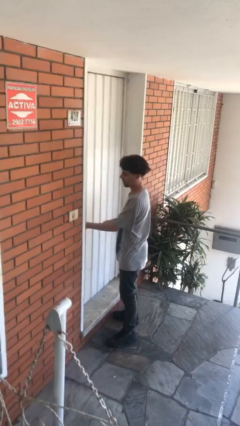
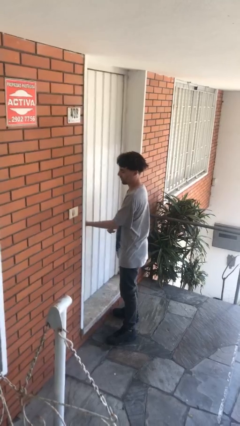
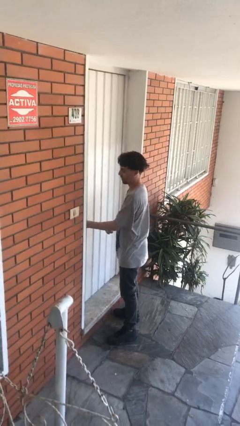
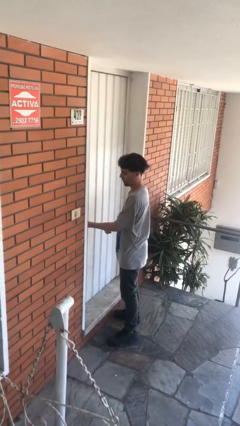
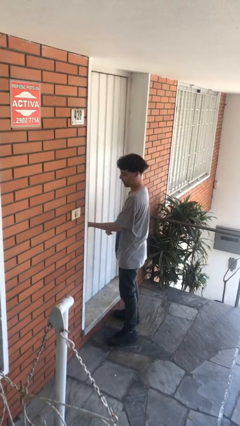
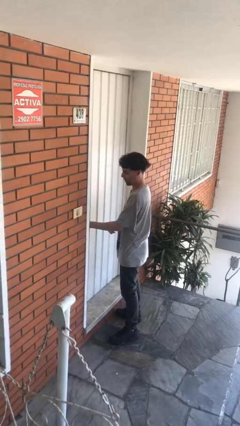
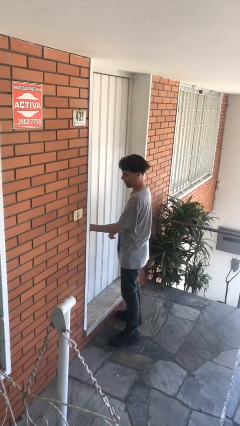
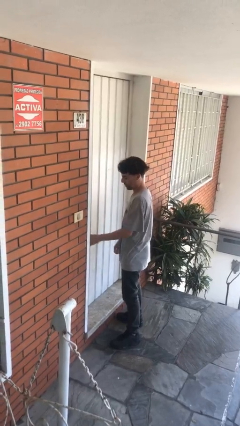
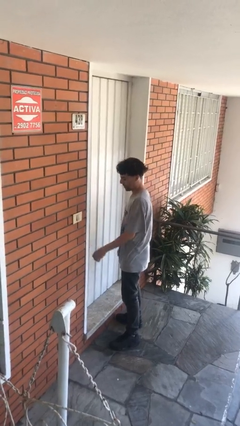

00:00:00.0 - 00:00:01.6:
person locks door with keys

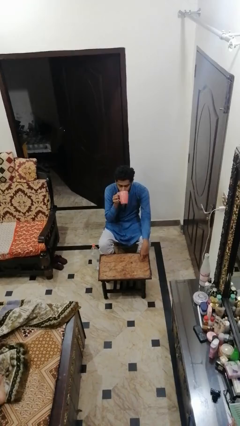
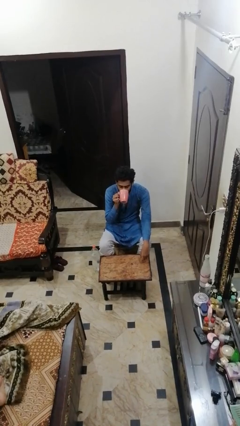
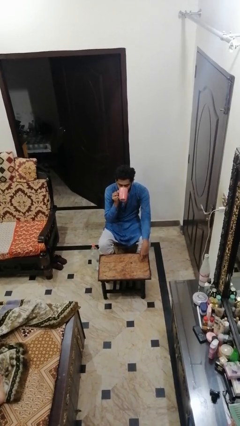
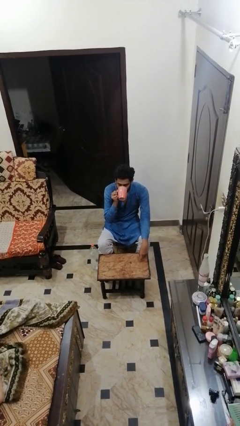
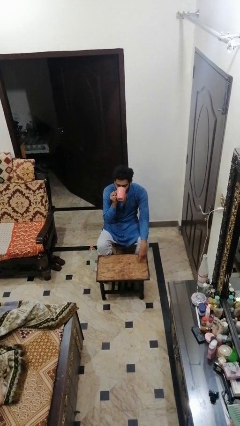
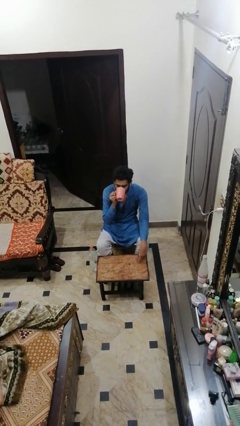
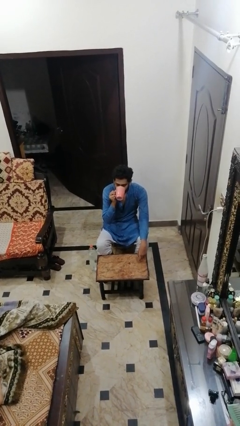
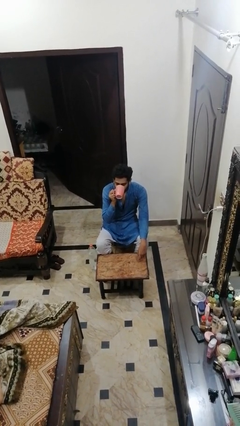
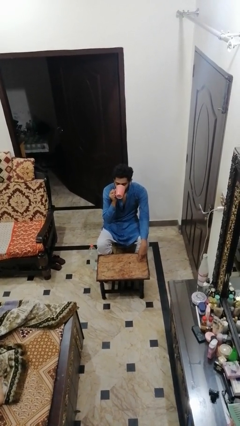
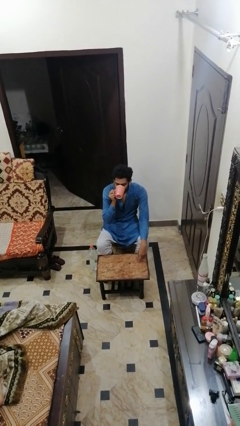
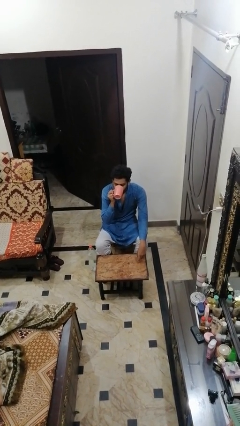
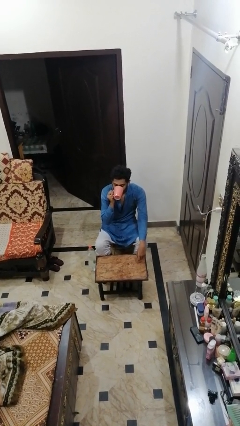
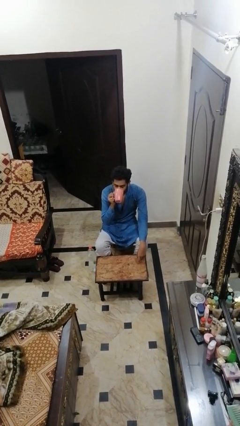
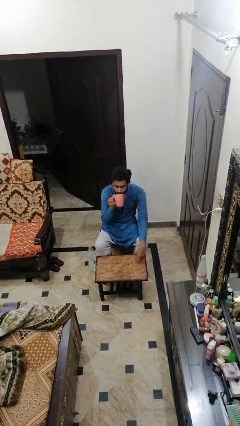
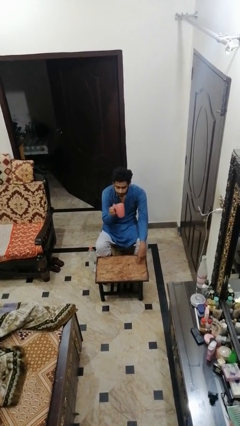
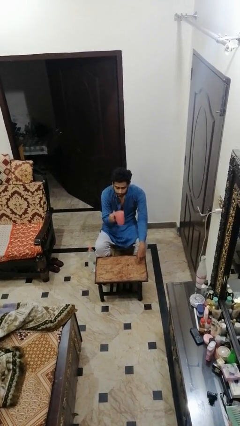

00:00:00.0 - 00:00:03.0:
person drinks from mug

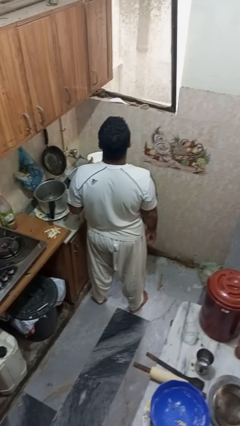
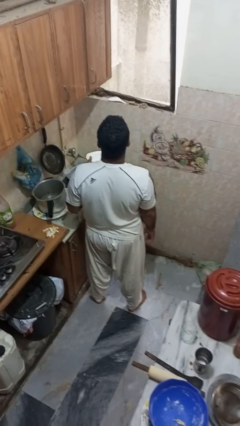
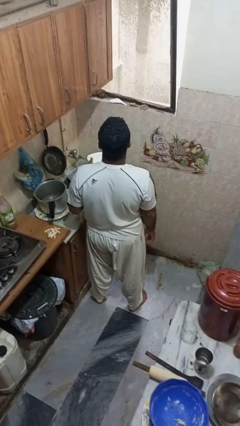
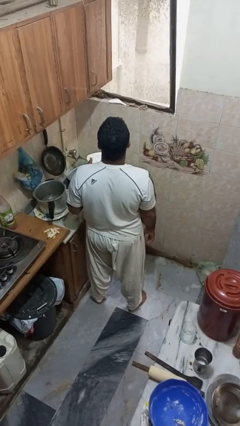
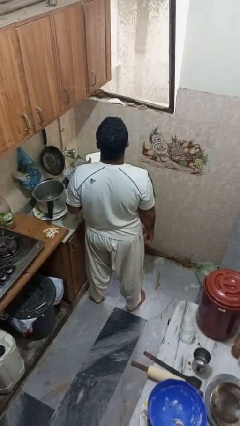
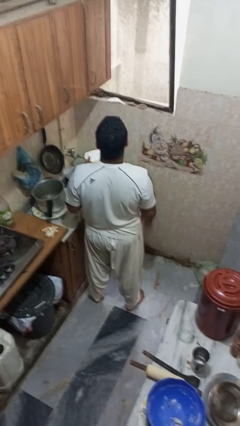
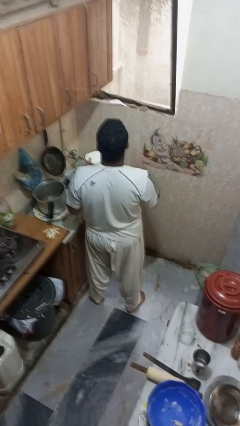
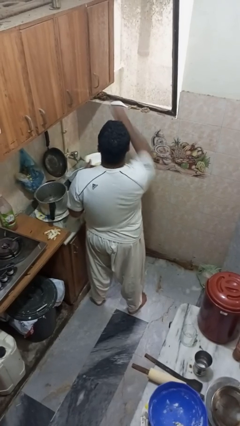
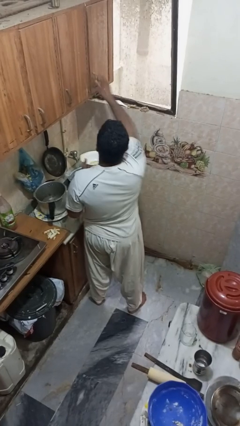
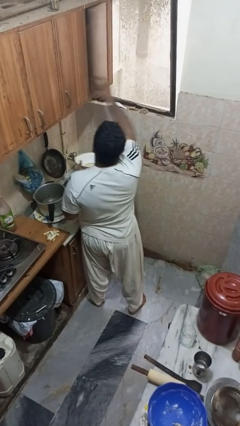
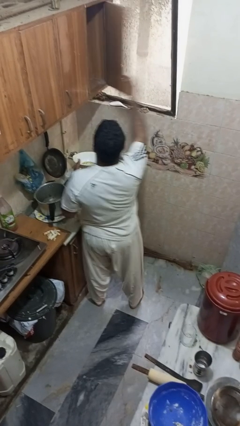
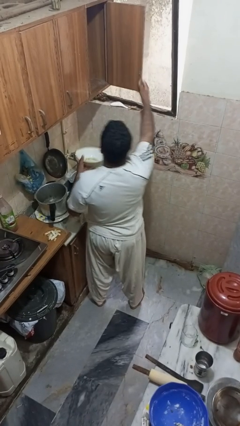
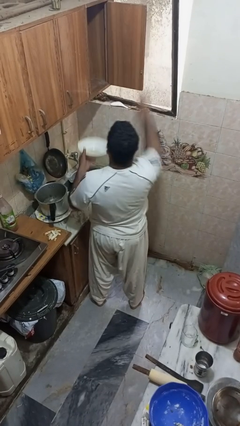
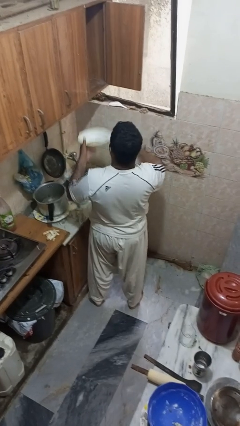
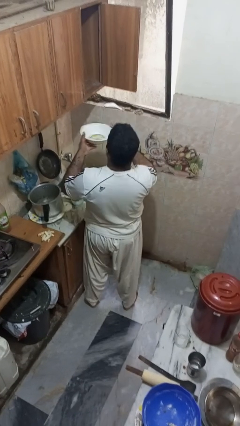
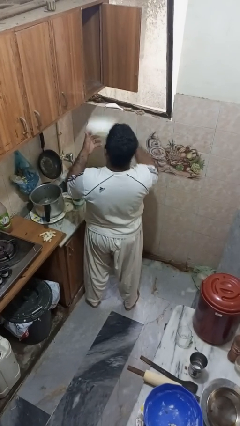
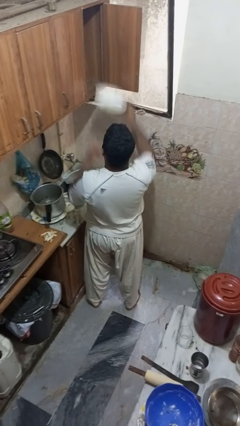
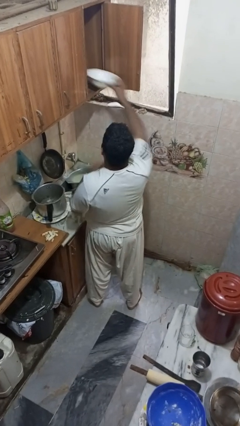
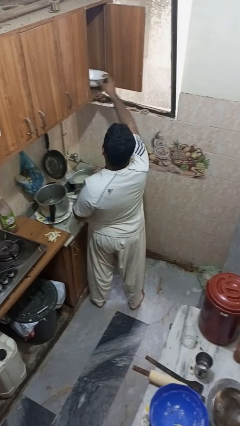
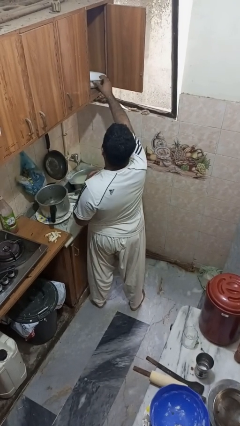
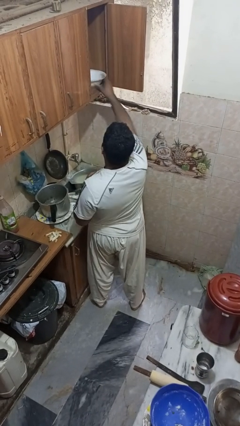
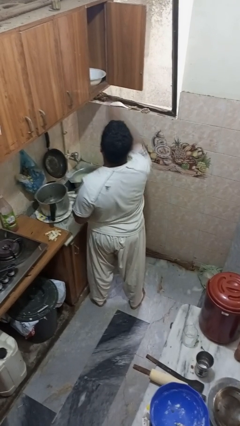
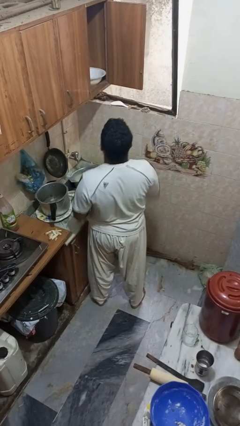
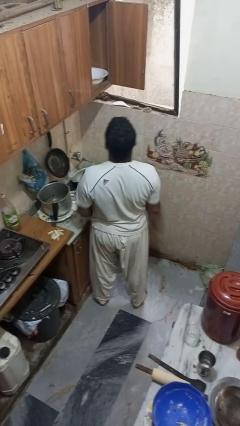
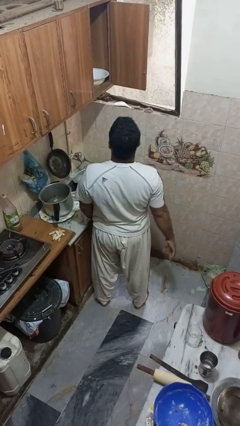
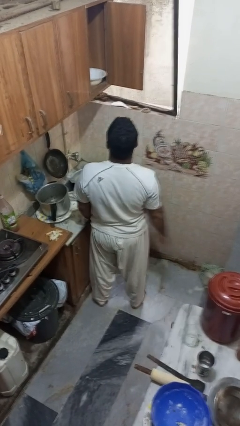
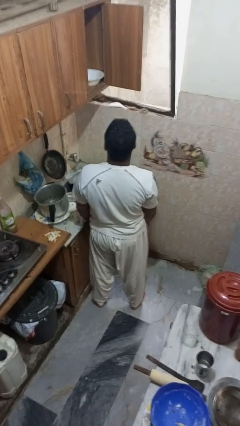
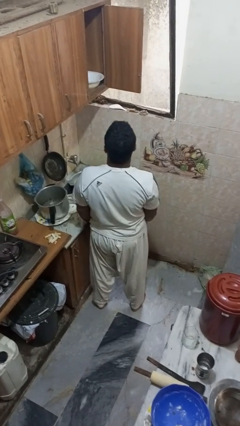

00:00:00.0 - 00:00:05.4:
person puts object in cabinet

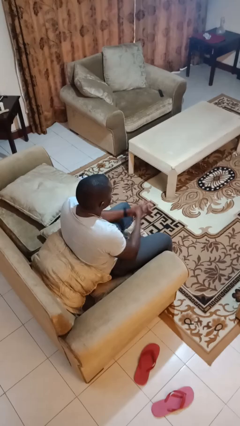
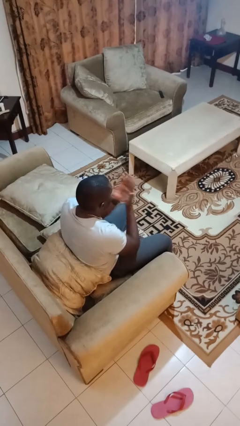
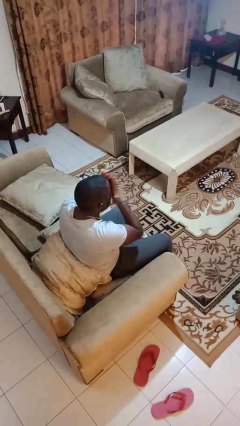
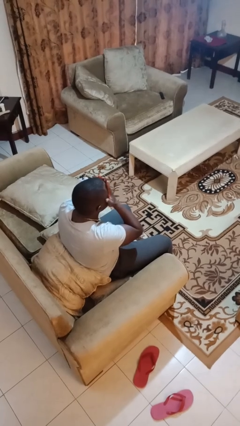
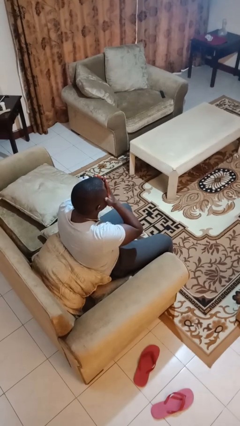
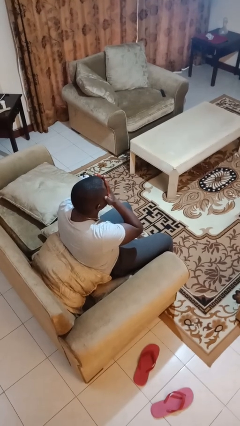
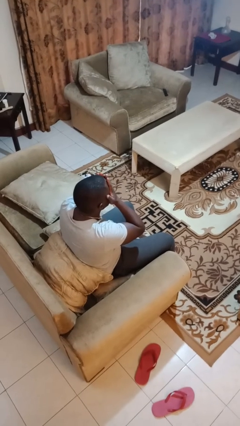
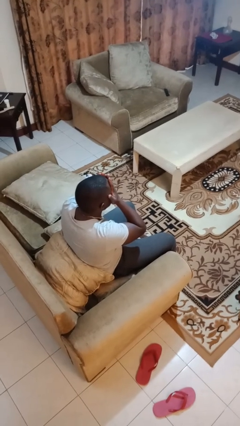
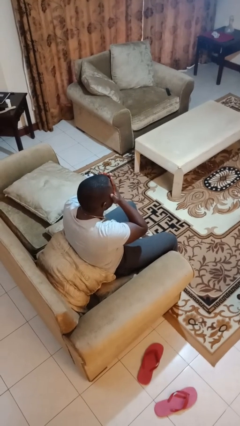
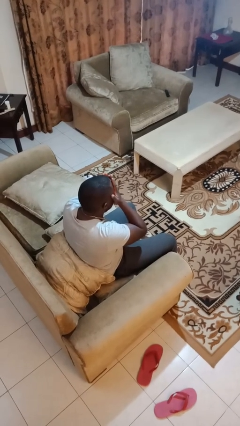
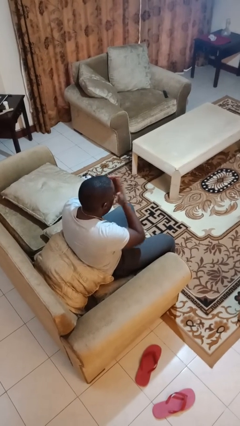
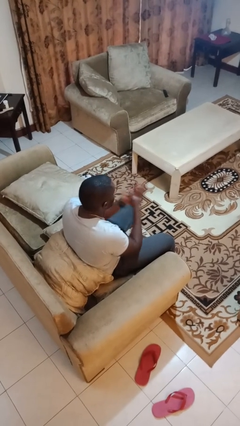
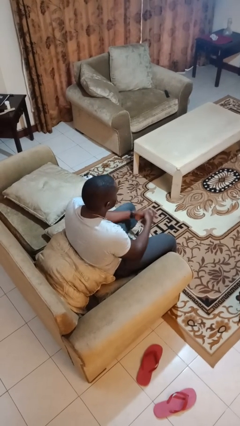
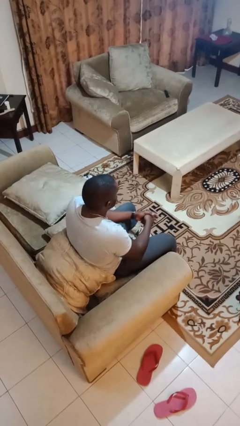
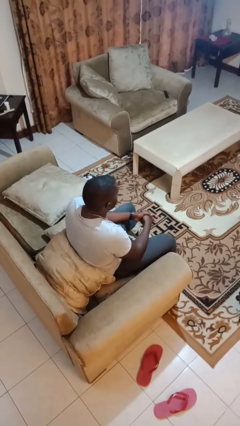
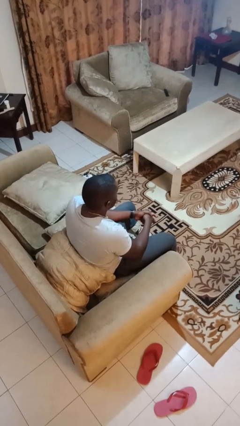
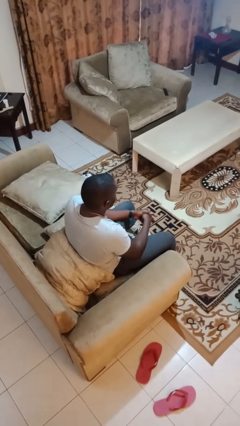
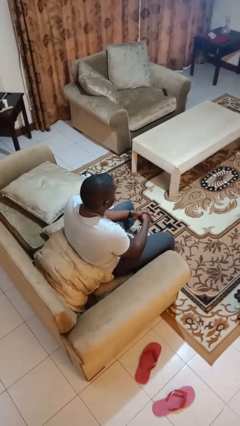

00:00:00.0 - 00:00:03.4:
person covers face with hands

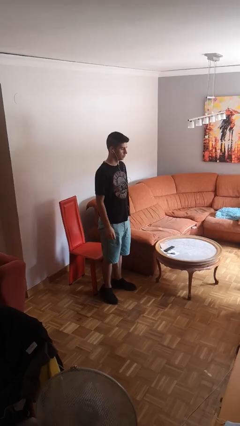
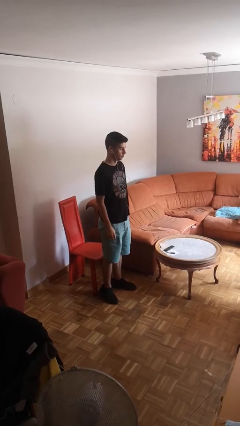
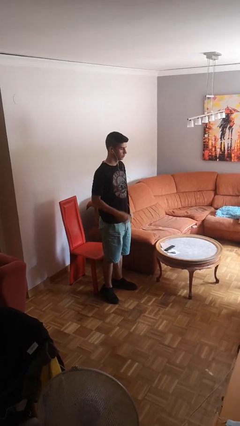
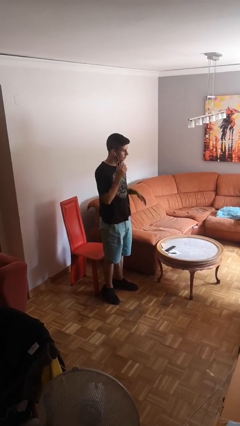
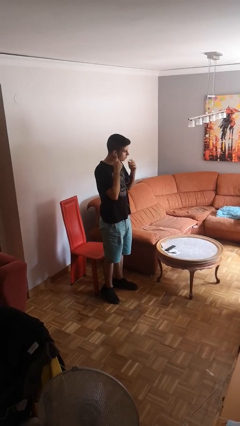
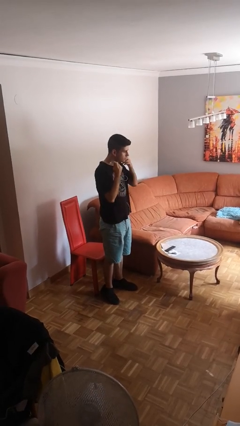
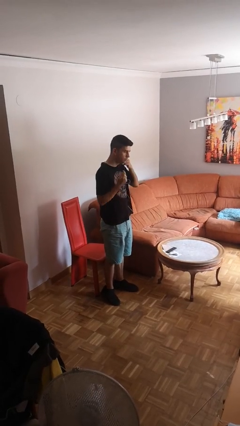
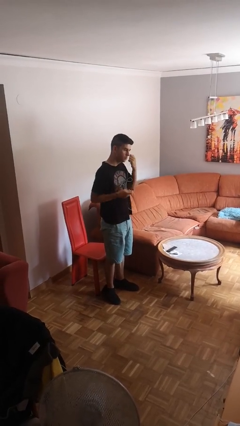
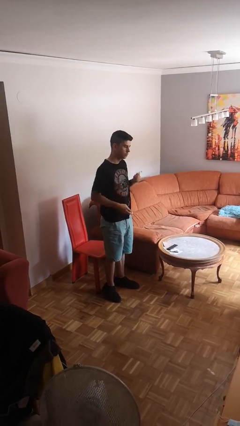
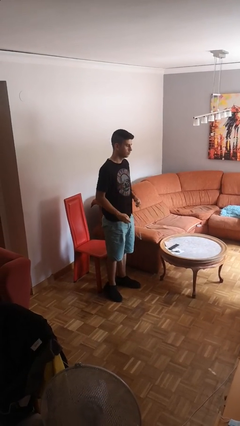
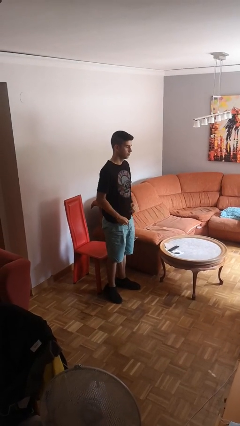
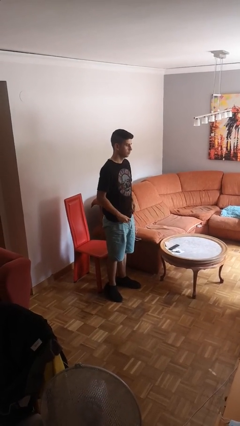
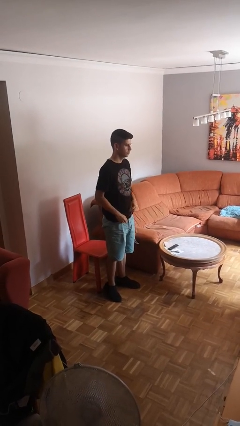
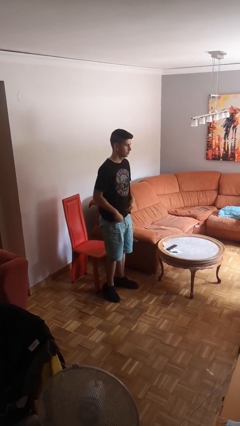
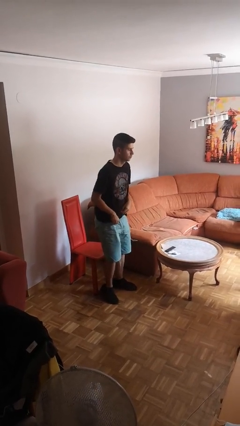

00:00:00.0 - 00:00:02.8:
person takes off headphones

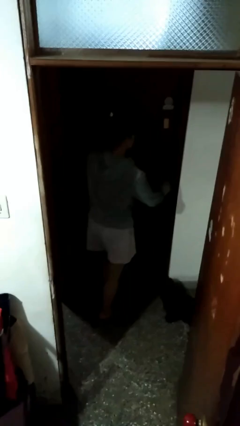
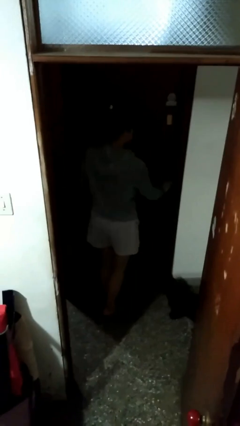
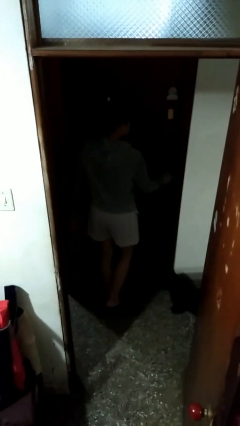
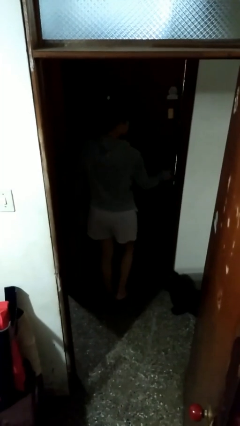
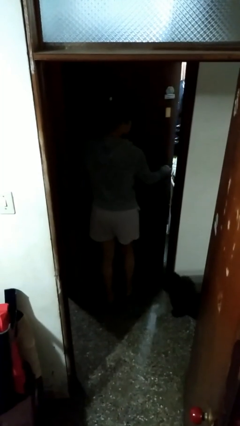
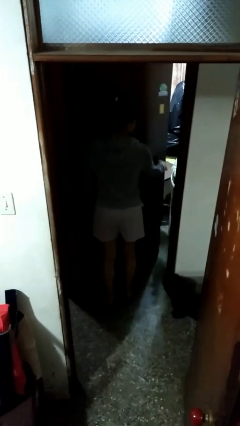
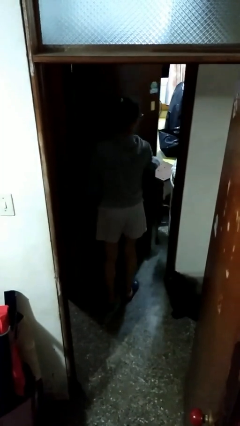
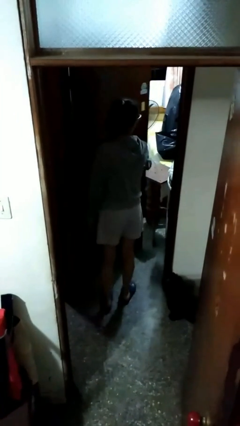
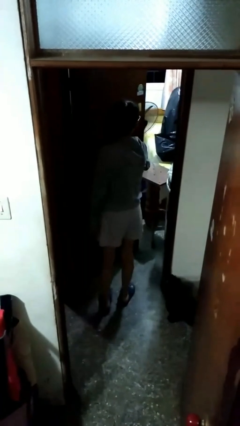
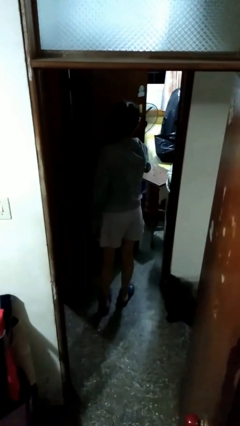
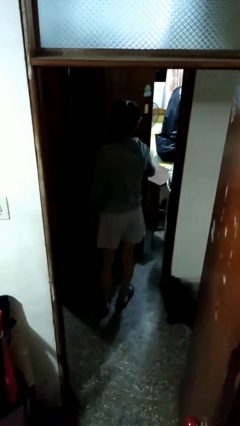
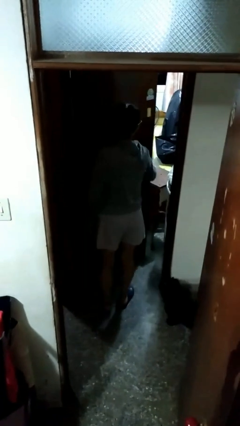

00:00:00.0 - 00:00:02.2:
person opens facility door
